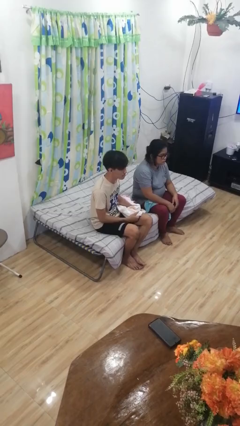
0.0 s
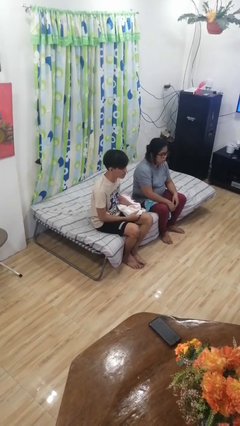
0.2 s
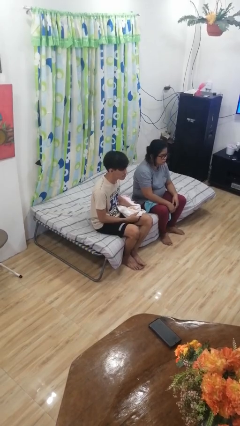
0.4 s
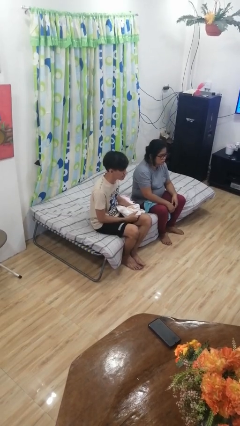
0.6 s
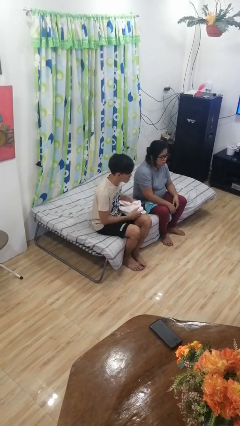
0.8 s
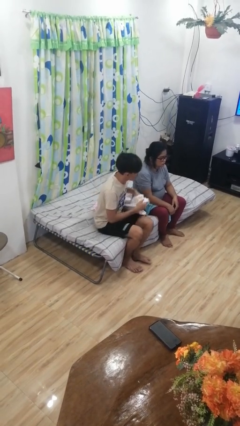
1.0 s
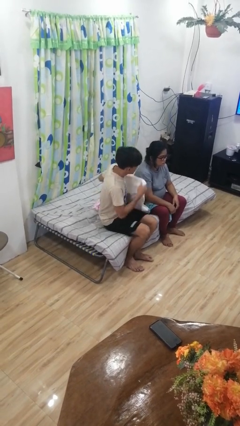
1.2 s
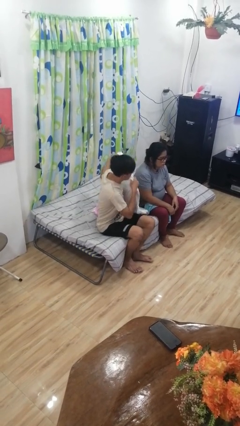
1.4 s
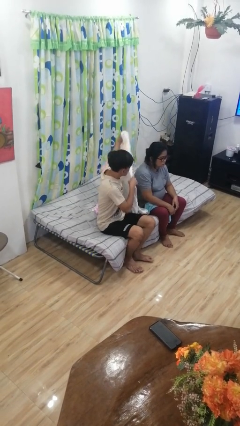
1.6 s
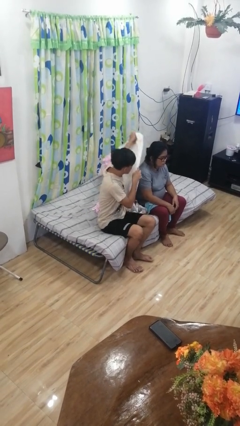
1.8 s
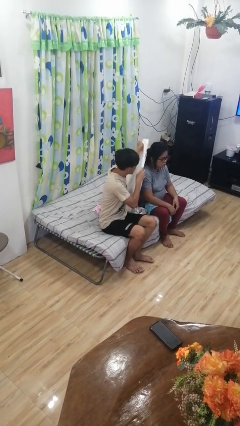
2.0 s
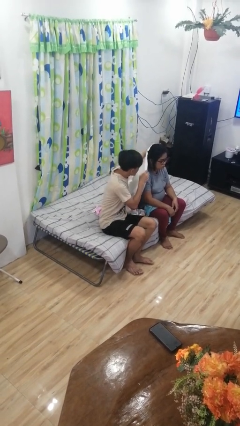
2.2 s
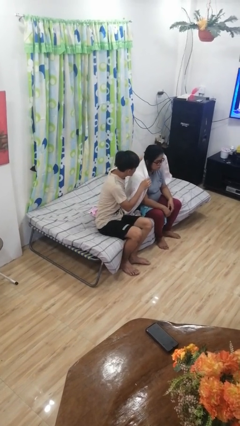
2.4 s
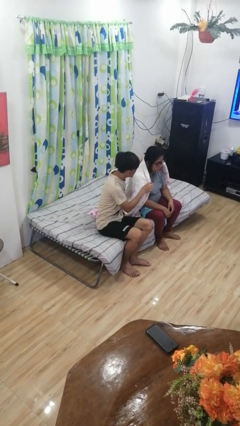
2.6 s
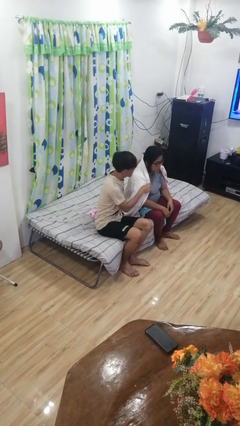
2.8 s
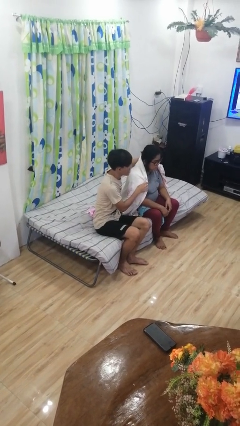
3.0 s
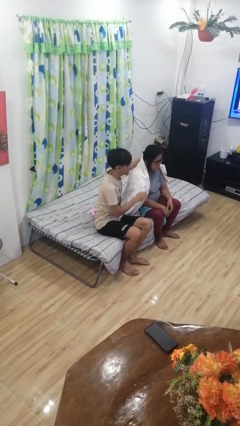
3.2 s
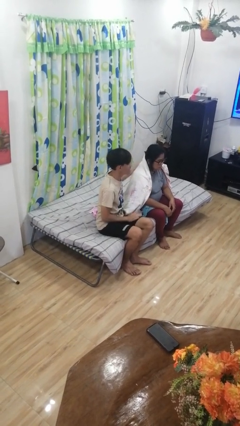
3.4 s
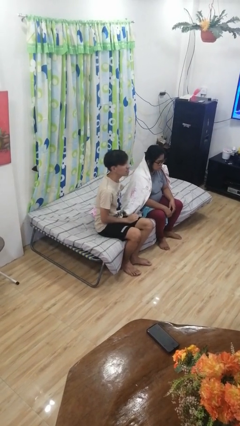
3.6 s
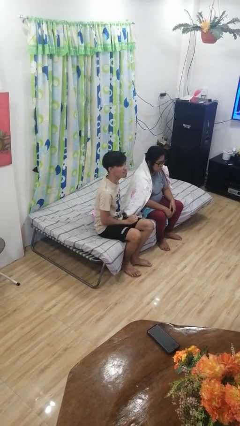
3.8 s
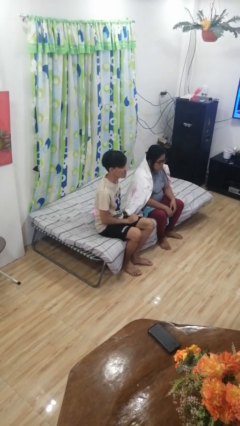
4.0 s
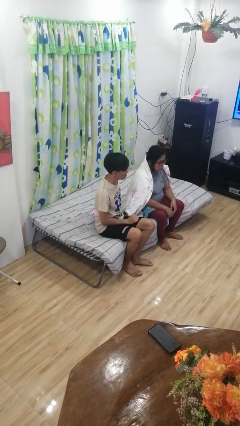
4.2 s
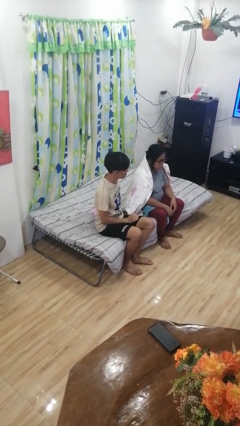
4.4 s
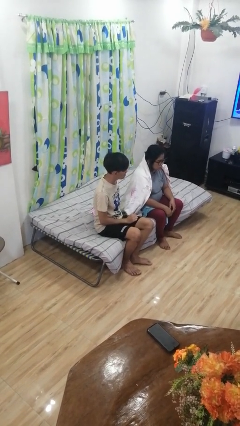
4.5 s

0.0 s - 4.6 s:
person covers friend with blanket

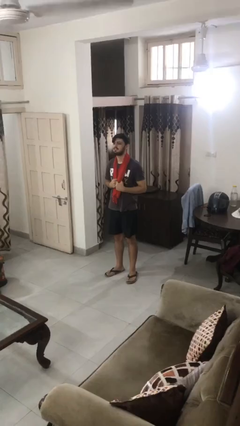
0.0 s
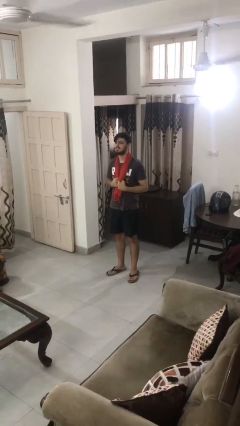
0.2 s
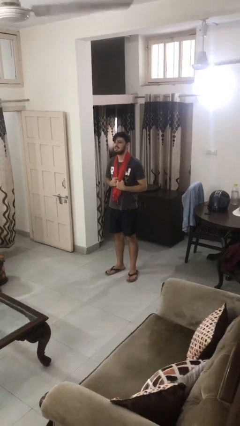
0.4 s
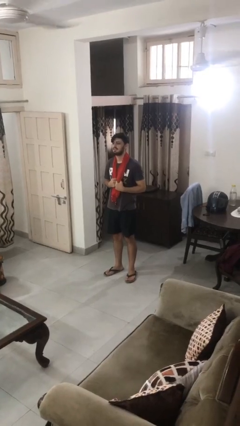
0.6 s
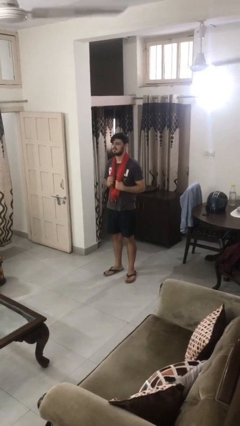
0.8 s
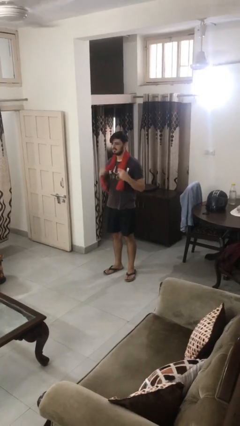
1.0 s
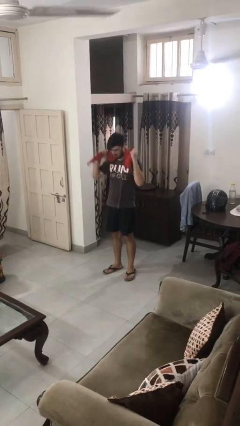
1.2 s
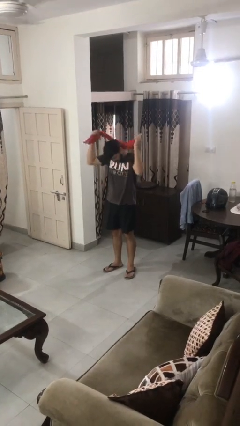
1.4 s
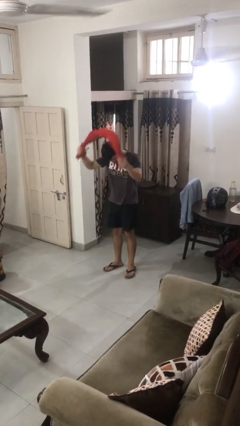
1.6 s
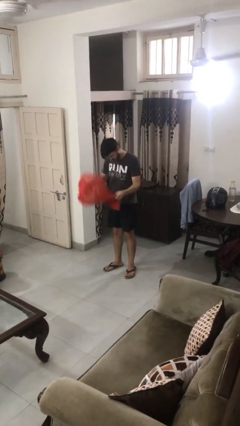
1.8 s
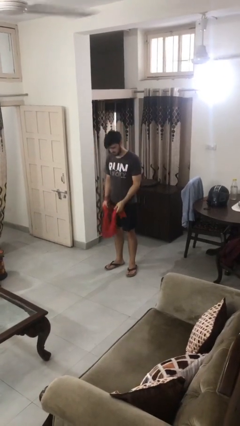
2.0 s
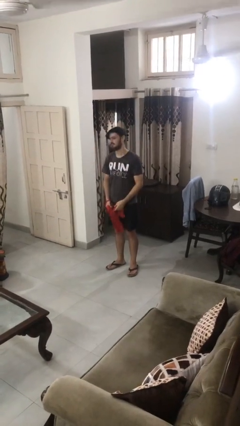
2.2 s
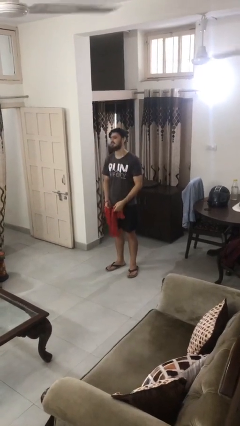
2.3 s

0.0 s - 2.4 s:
person takes off scarf

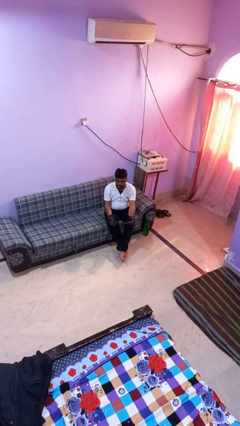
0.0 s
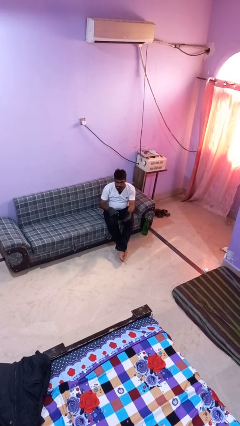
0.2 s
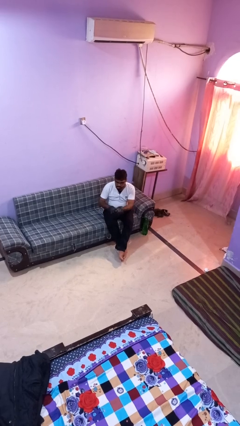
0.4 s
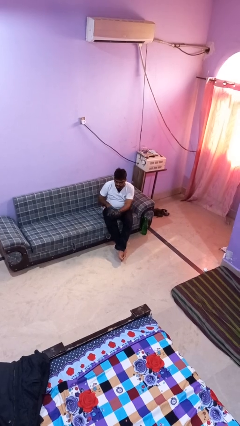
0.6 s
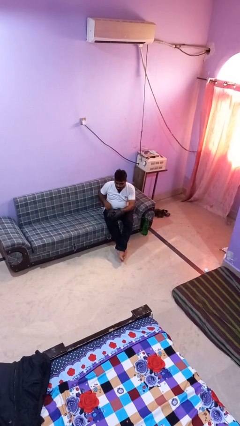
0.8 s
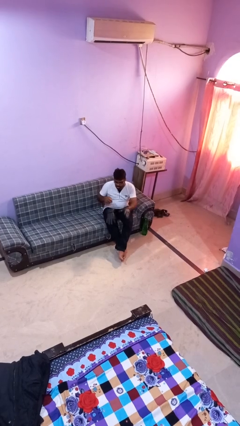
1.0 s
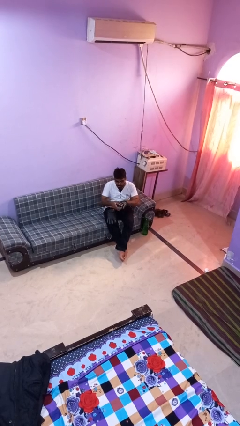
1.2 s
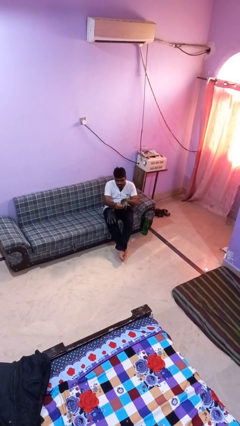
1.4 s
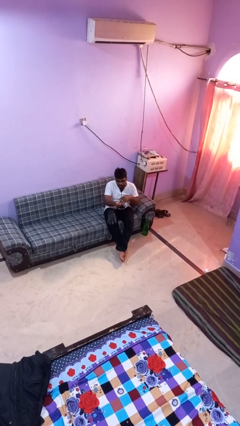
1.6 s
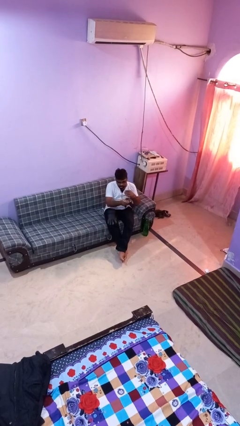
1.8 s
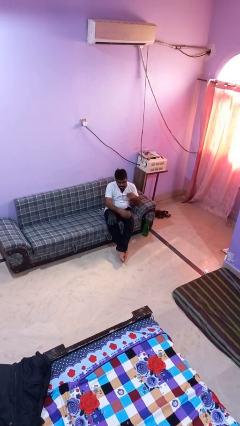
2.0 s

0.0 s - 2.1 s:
person takes off gloves

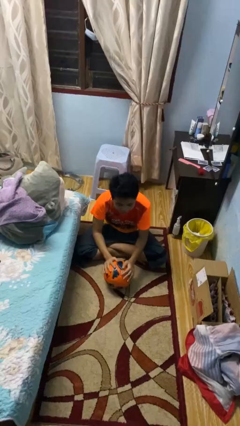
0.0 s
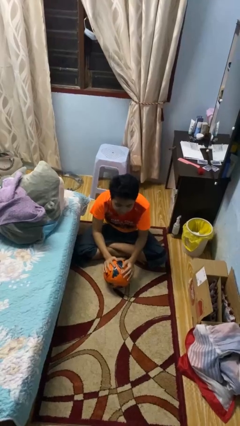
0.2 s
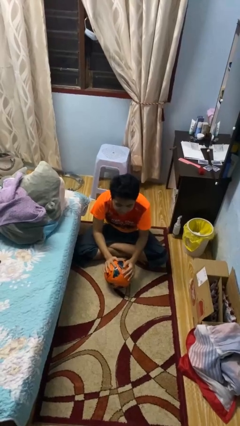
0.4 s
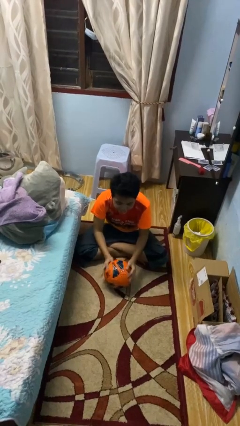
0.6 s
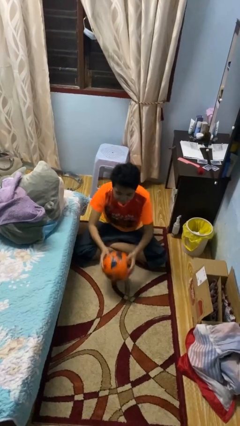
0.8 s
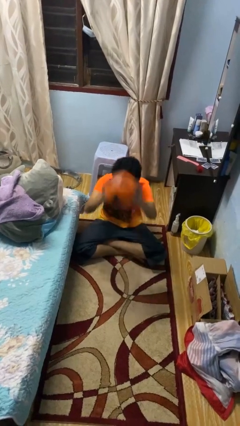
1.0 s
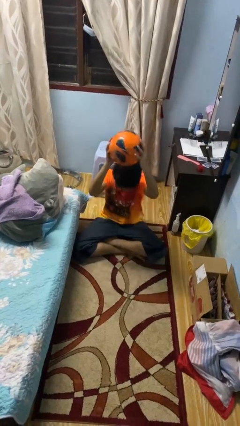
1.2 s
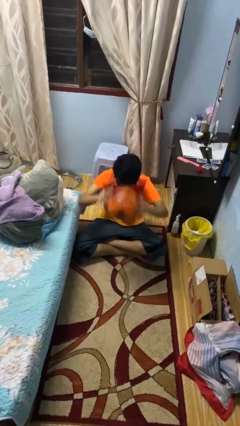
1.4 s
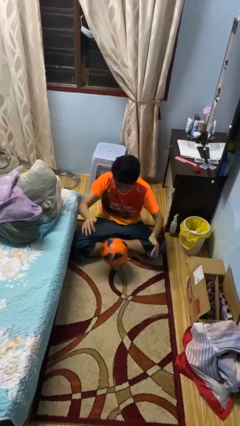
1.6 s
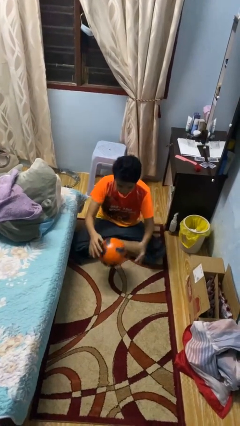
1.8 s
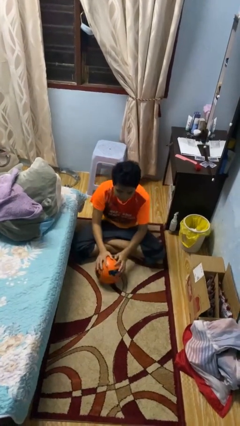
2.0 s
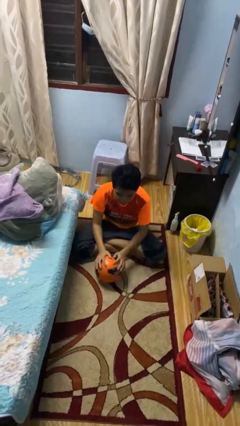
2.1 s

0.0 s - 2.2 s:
person bounces ball on floor

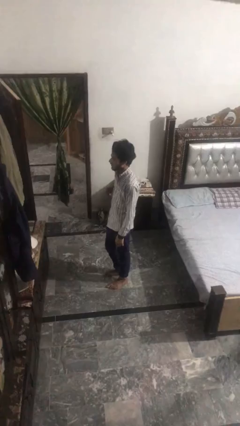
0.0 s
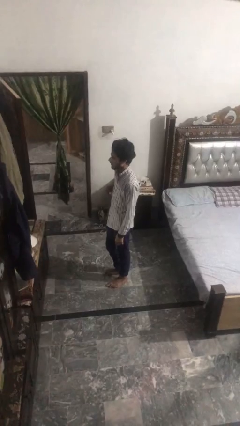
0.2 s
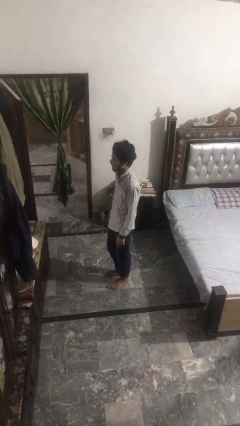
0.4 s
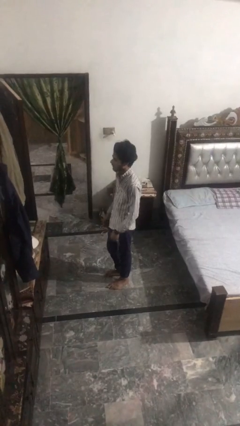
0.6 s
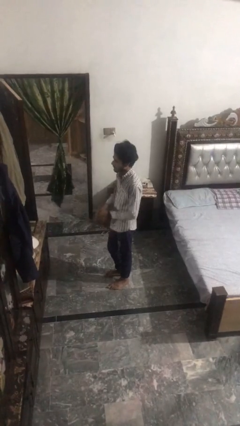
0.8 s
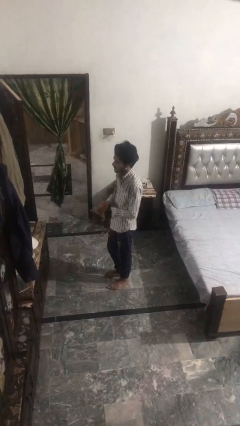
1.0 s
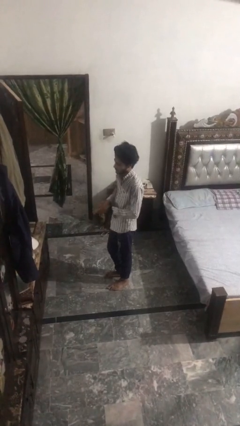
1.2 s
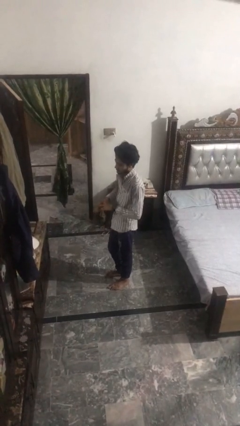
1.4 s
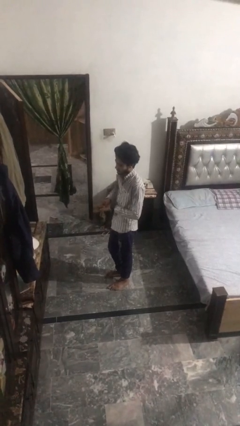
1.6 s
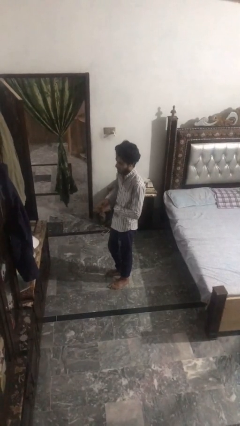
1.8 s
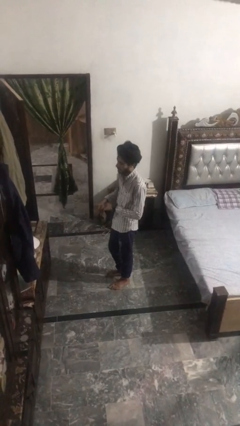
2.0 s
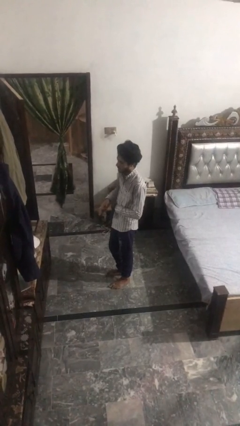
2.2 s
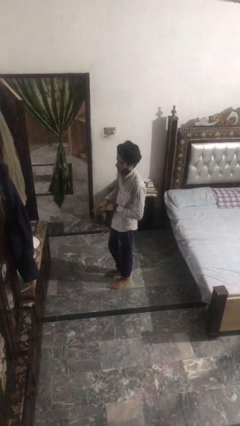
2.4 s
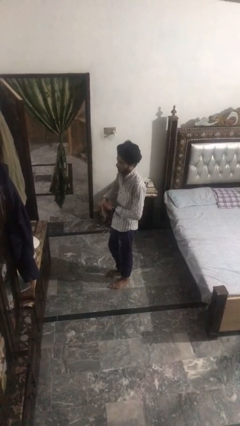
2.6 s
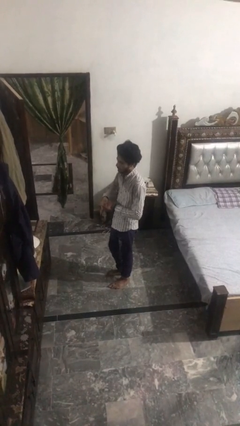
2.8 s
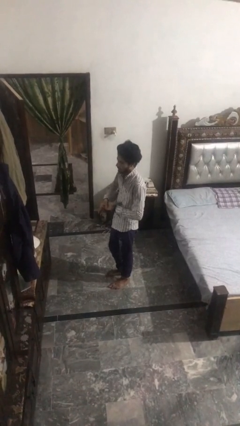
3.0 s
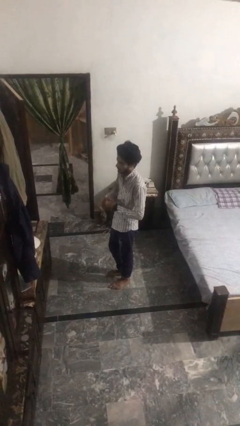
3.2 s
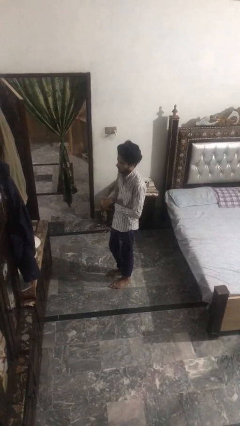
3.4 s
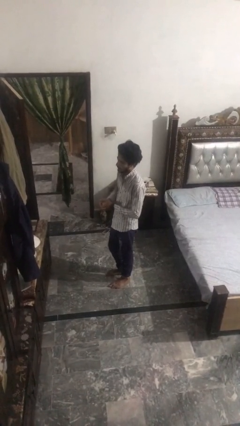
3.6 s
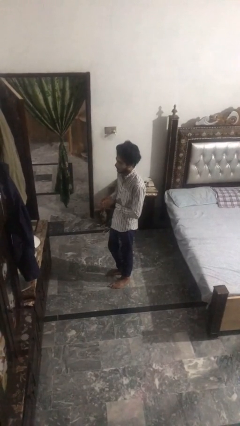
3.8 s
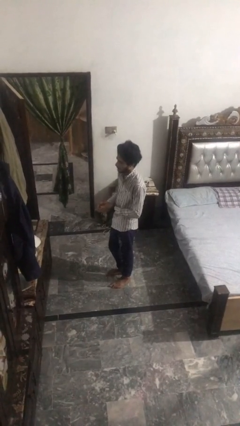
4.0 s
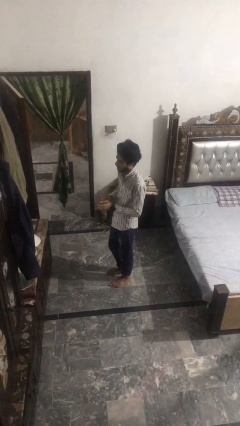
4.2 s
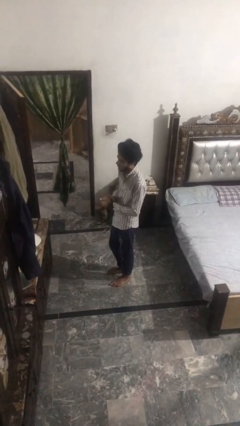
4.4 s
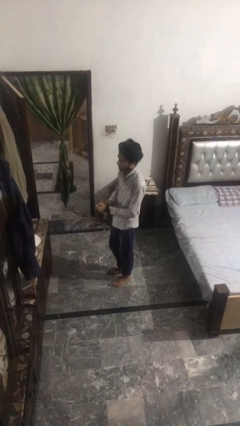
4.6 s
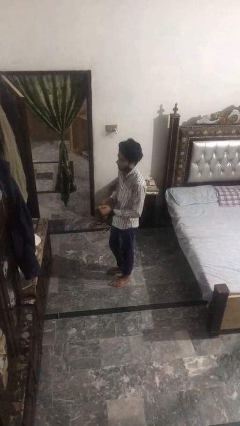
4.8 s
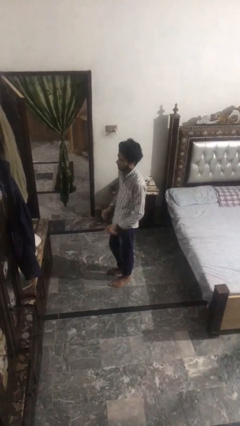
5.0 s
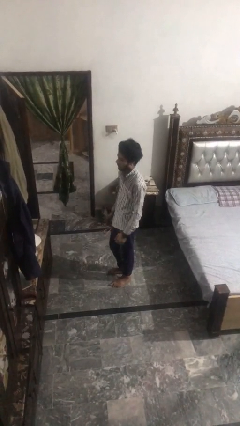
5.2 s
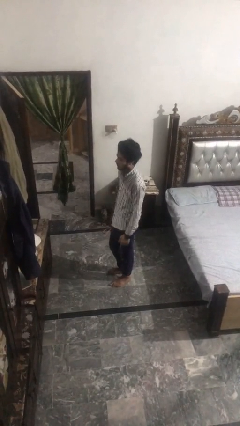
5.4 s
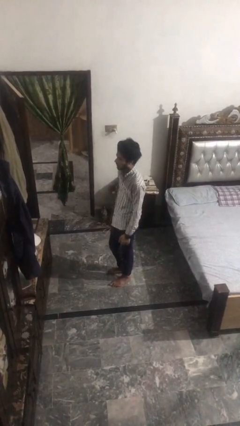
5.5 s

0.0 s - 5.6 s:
person cracks knuckles

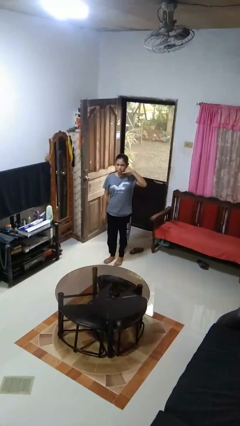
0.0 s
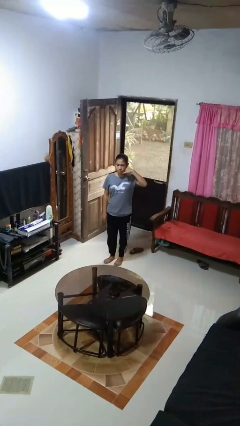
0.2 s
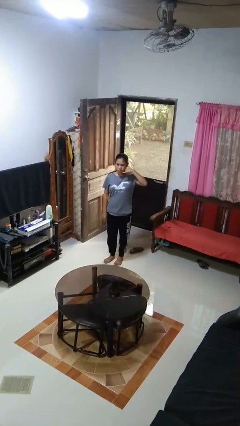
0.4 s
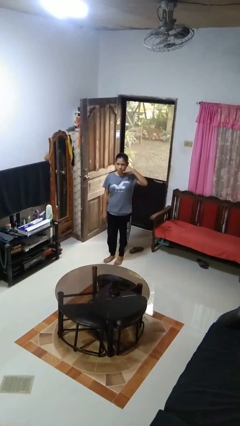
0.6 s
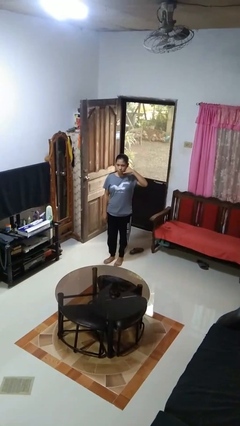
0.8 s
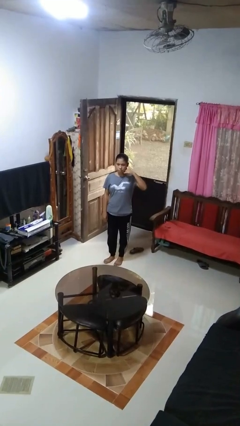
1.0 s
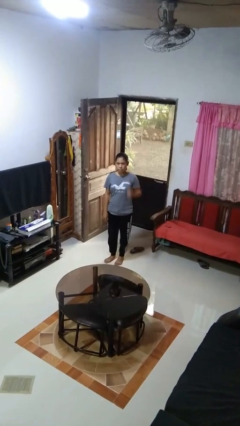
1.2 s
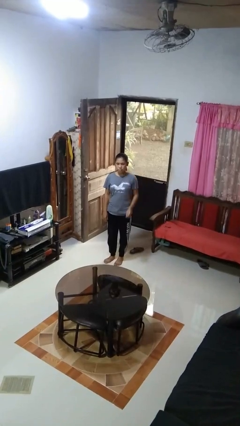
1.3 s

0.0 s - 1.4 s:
person gestures call me
